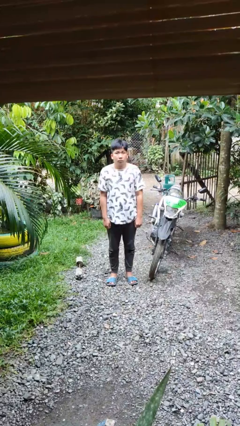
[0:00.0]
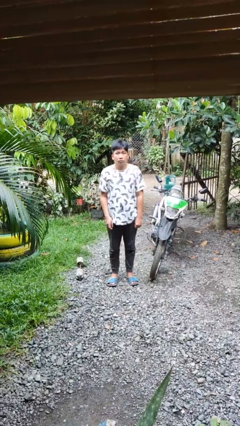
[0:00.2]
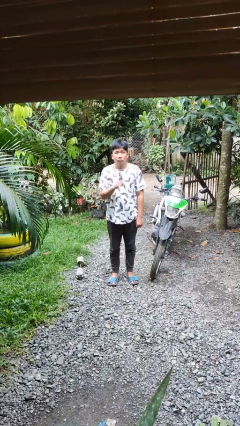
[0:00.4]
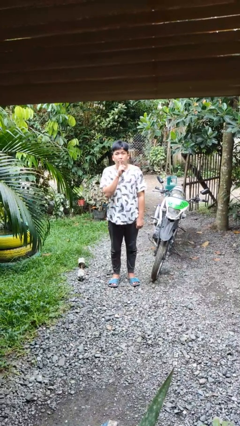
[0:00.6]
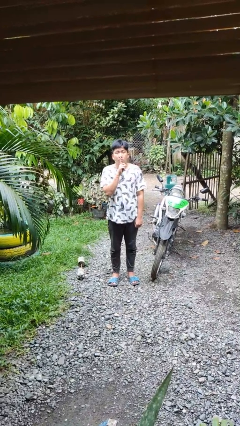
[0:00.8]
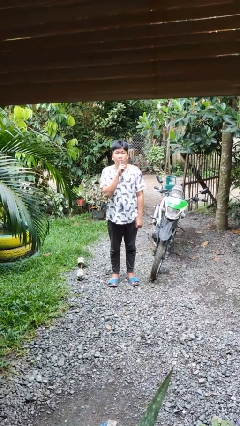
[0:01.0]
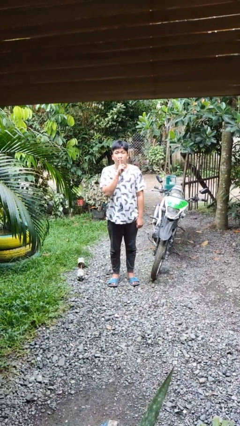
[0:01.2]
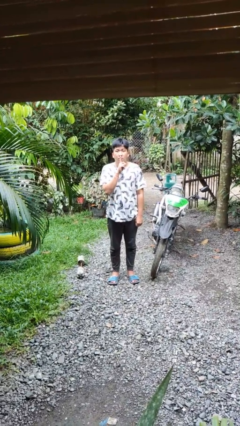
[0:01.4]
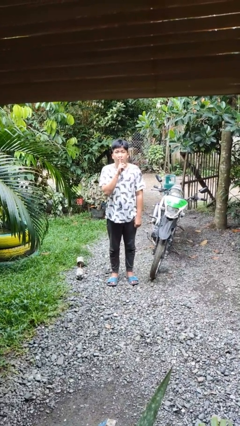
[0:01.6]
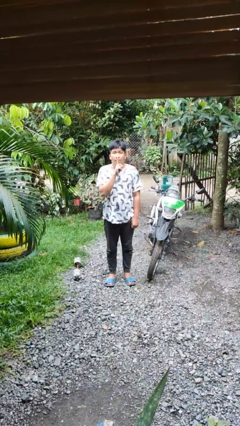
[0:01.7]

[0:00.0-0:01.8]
person gestures be quiet

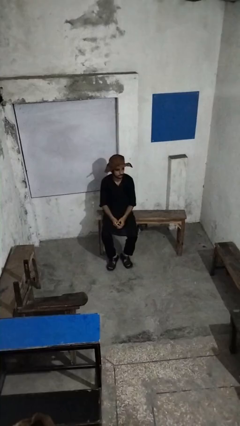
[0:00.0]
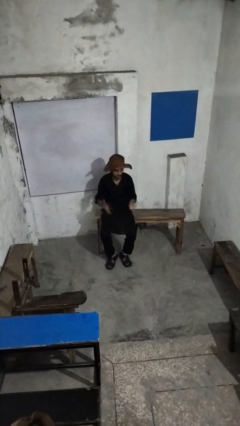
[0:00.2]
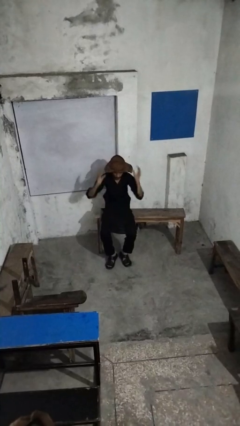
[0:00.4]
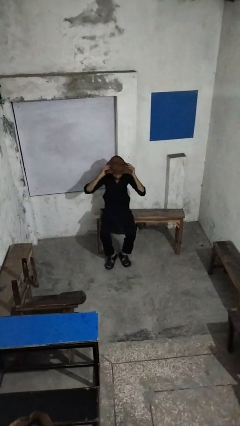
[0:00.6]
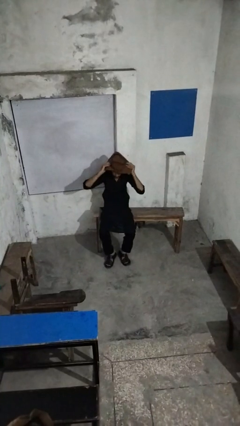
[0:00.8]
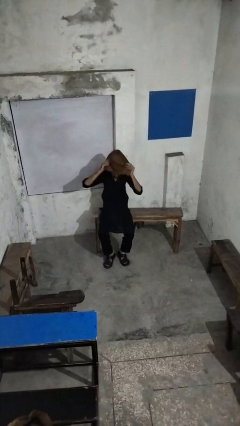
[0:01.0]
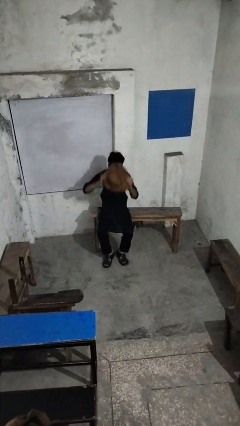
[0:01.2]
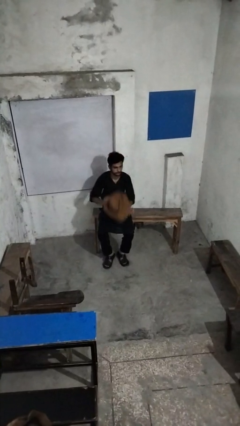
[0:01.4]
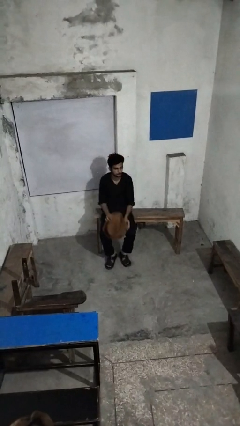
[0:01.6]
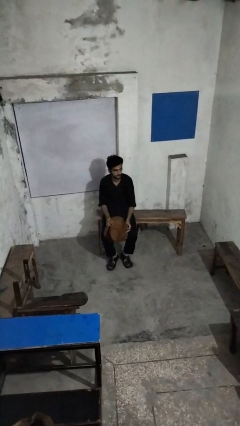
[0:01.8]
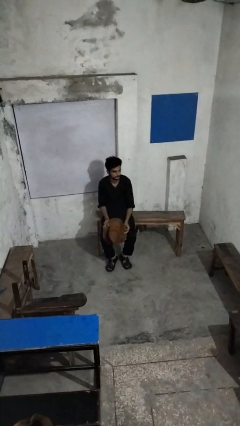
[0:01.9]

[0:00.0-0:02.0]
person takes off hat

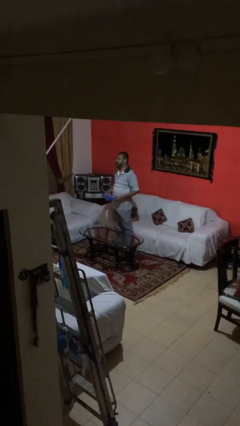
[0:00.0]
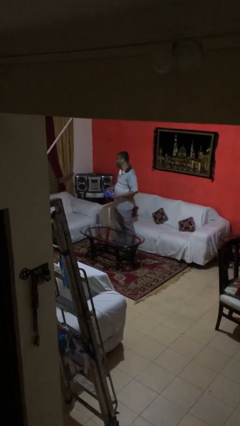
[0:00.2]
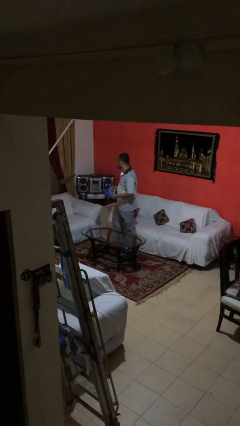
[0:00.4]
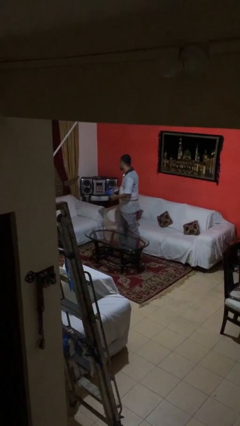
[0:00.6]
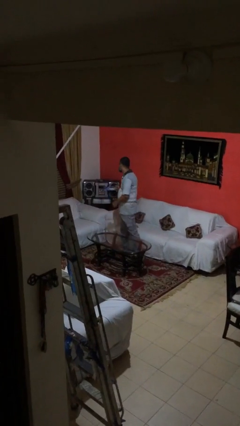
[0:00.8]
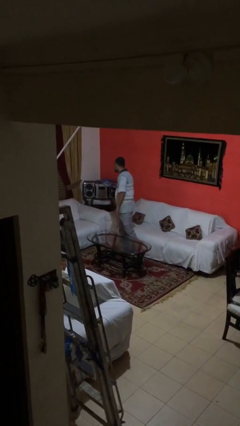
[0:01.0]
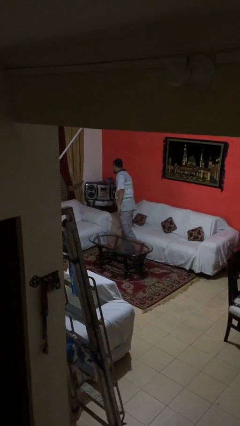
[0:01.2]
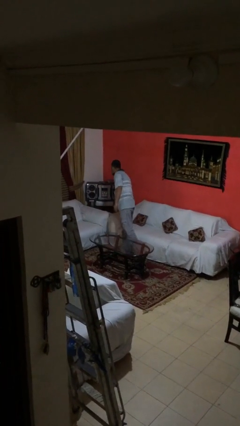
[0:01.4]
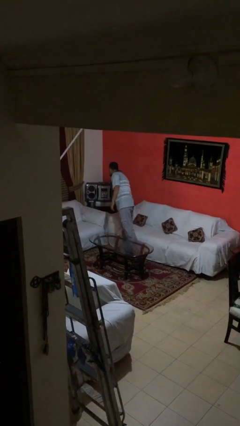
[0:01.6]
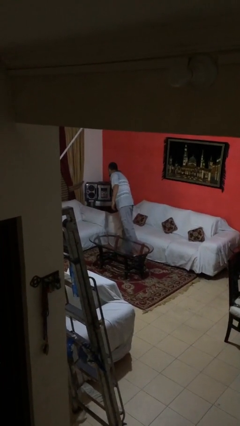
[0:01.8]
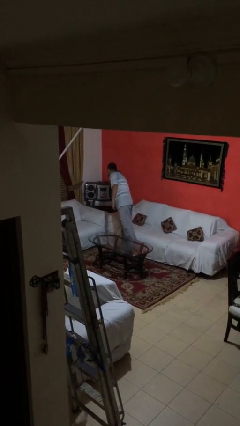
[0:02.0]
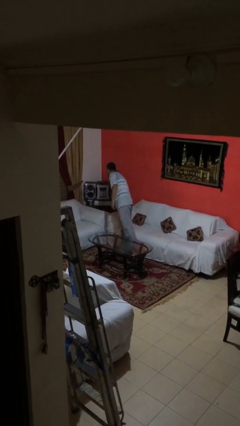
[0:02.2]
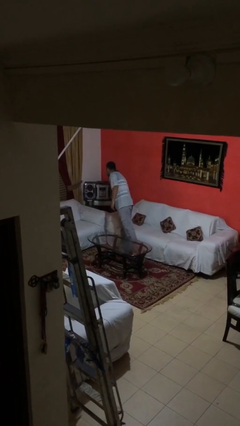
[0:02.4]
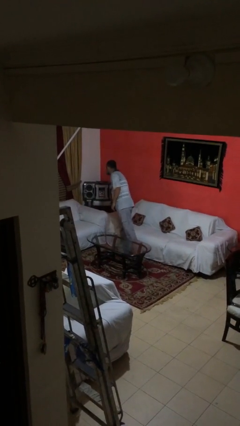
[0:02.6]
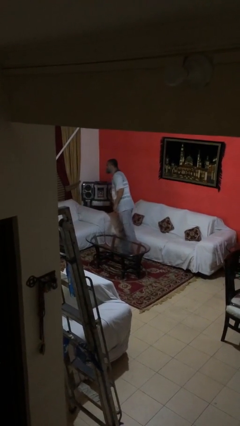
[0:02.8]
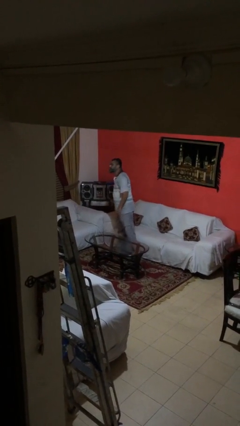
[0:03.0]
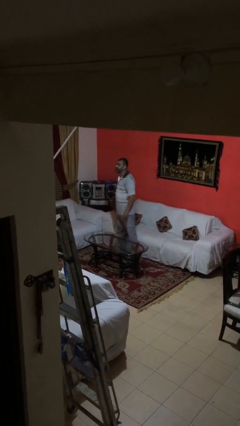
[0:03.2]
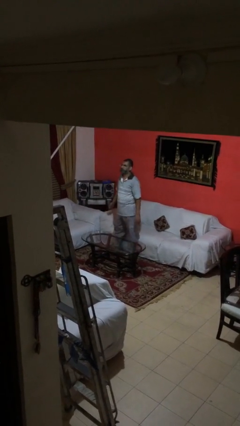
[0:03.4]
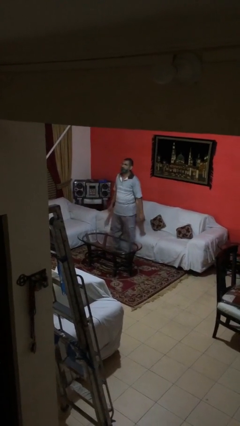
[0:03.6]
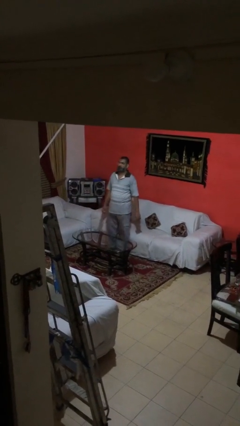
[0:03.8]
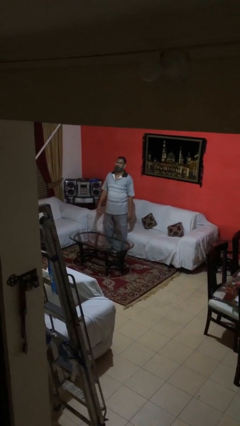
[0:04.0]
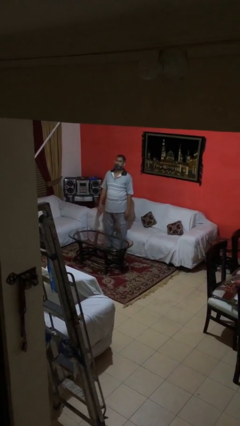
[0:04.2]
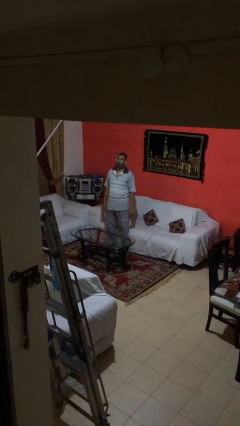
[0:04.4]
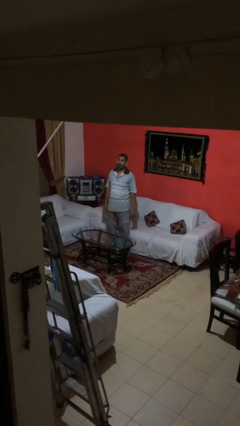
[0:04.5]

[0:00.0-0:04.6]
person puts down object on shelf

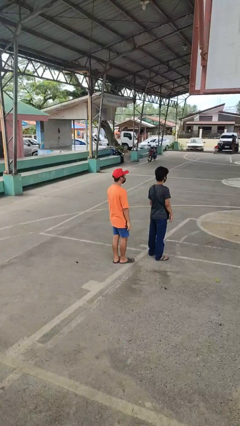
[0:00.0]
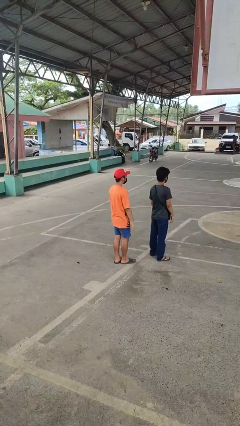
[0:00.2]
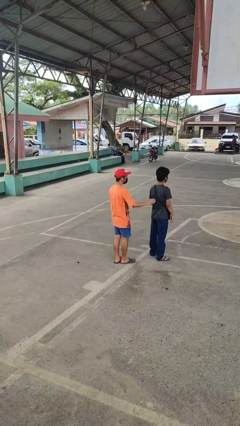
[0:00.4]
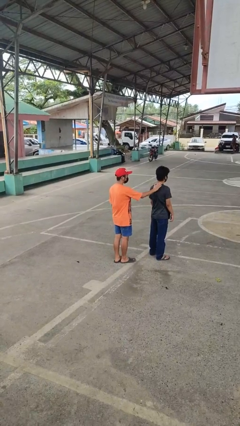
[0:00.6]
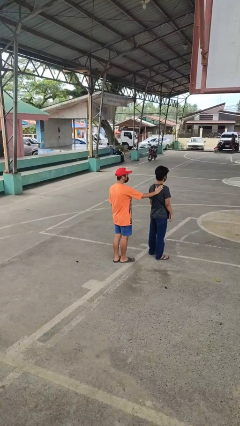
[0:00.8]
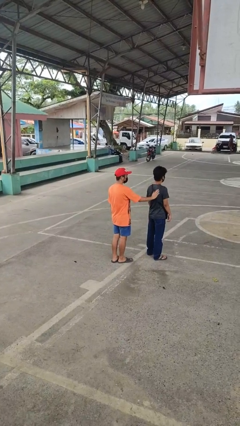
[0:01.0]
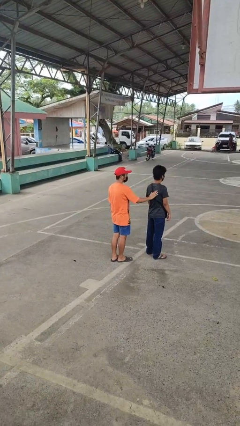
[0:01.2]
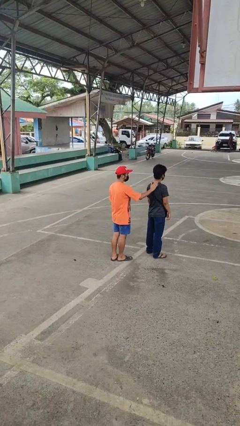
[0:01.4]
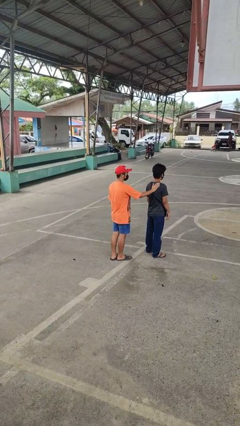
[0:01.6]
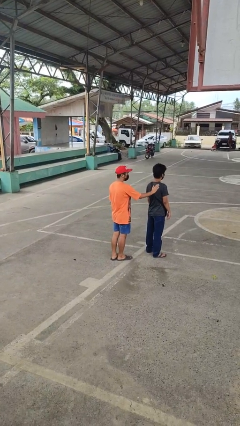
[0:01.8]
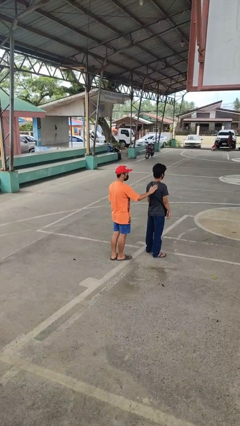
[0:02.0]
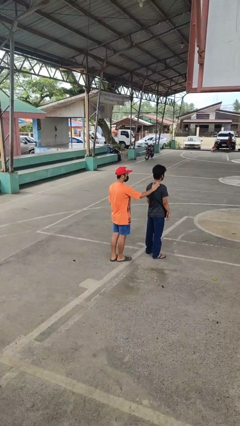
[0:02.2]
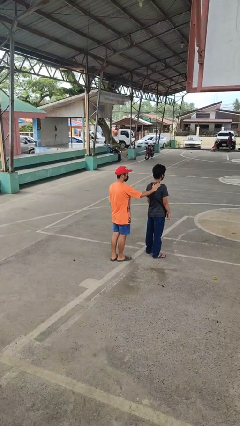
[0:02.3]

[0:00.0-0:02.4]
person touches back of person

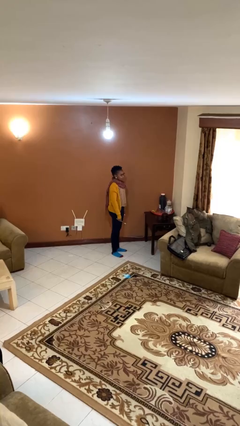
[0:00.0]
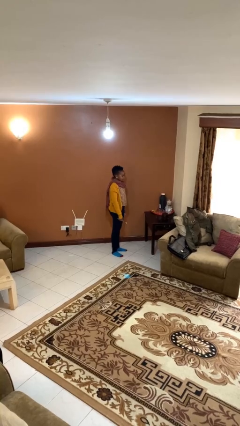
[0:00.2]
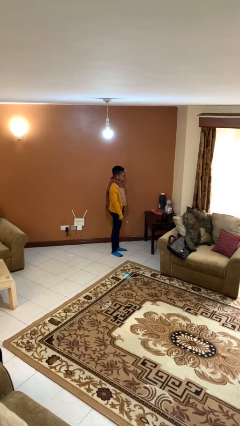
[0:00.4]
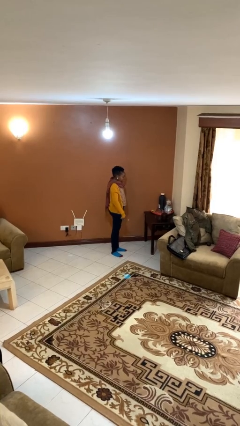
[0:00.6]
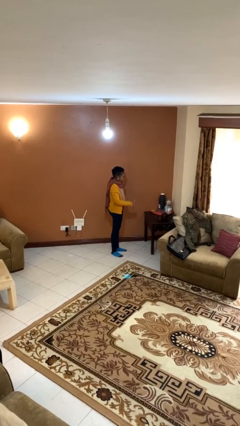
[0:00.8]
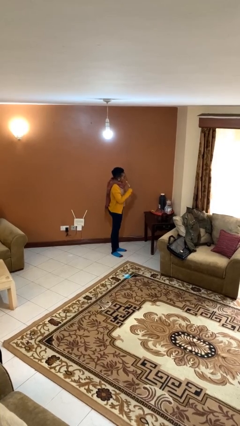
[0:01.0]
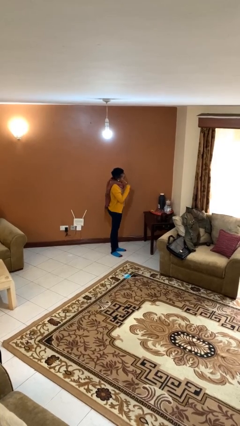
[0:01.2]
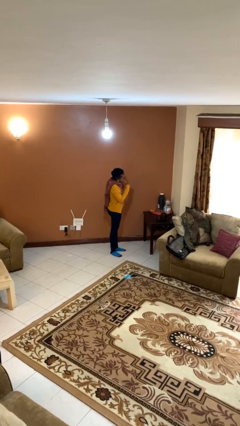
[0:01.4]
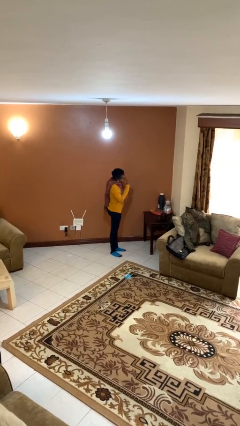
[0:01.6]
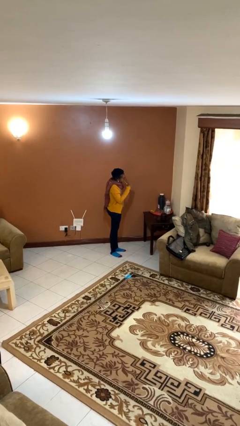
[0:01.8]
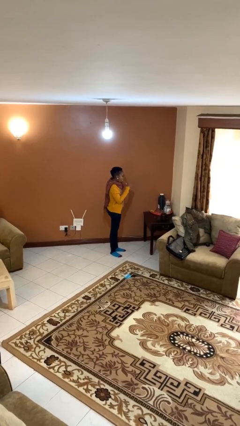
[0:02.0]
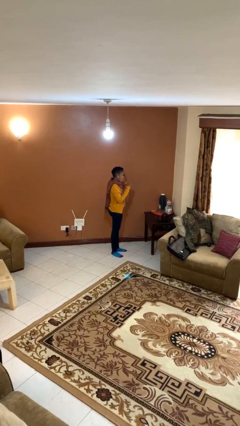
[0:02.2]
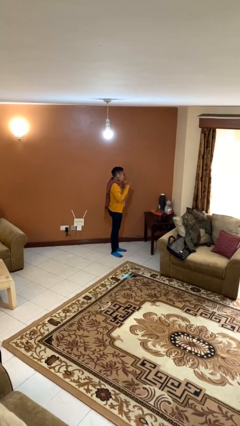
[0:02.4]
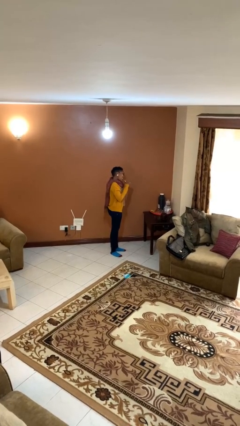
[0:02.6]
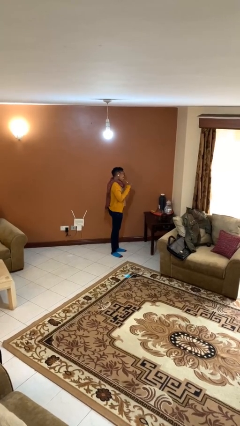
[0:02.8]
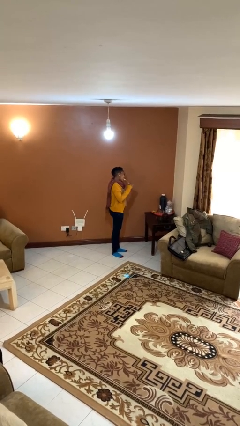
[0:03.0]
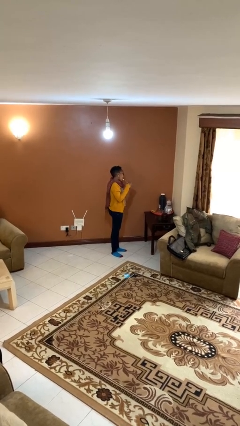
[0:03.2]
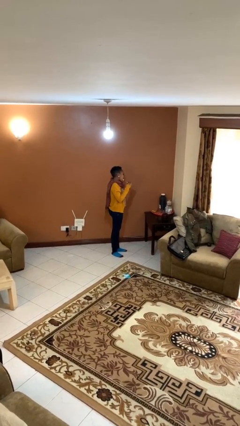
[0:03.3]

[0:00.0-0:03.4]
person brushes teeth

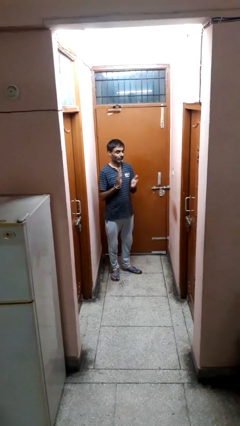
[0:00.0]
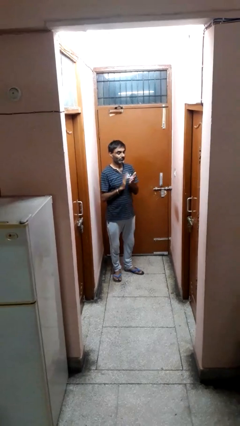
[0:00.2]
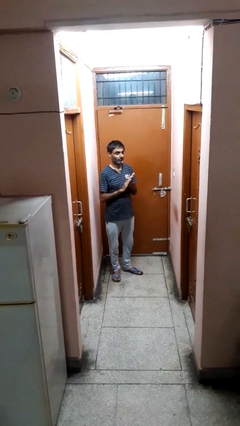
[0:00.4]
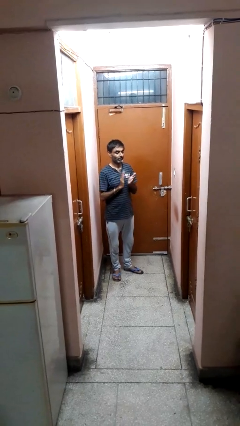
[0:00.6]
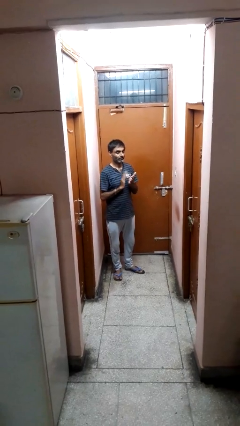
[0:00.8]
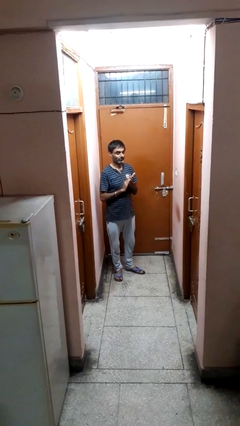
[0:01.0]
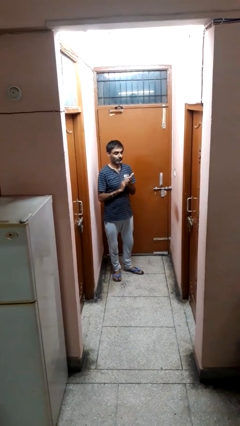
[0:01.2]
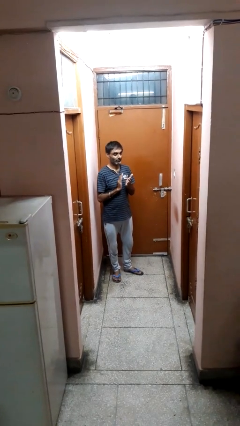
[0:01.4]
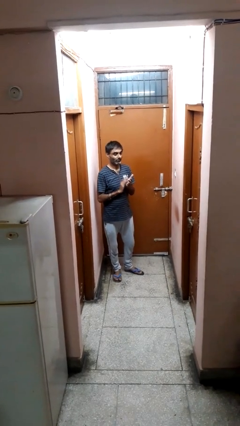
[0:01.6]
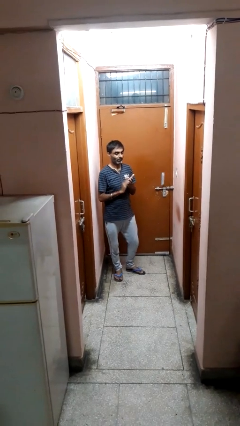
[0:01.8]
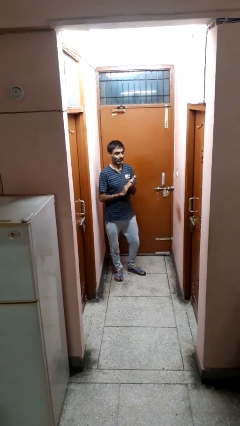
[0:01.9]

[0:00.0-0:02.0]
person claps hands

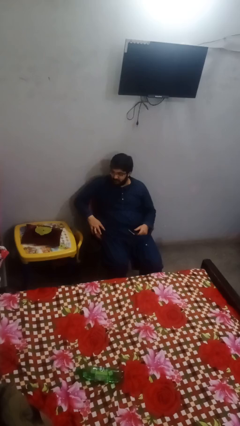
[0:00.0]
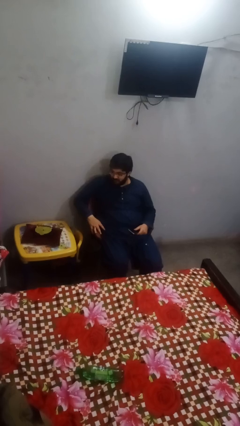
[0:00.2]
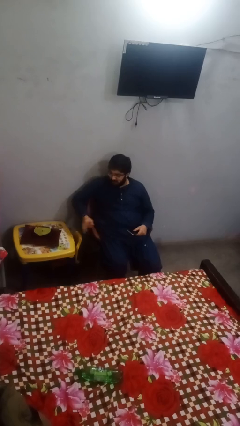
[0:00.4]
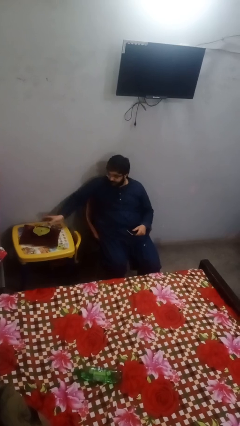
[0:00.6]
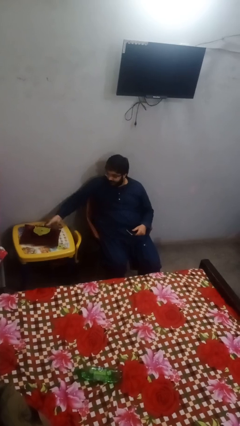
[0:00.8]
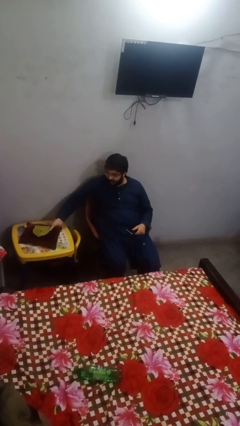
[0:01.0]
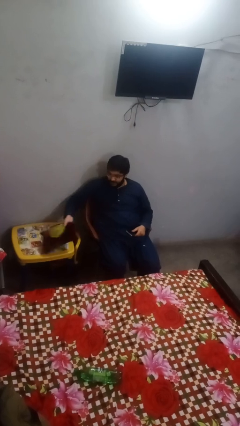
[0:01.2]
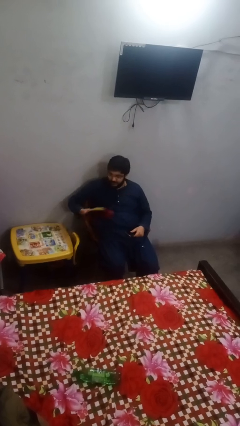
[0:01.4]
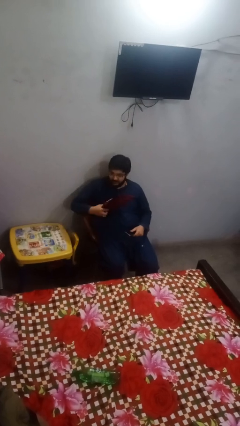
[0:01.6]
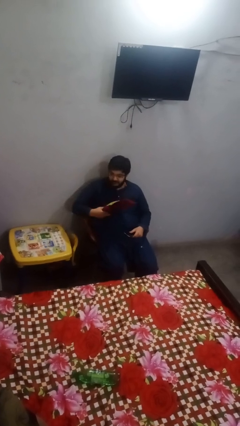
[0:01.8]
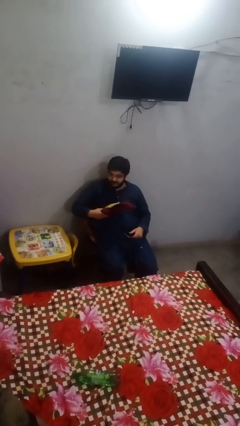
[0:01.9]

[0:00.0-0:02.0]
person picks up object from table
